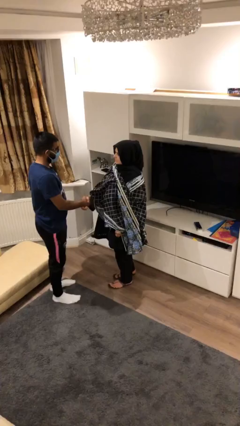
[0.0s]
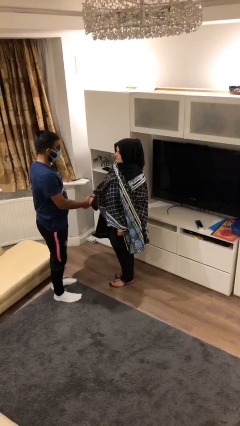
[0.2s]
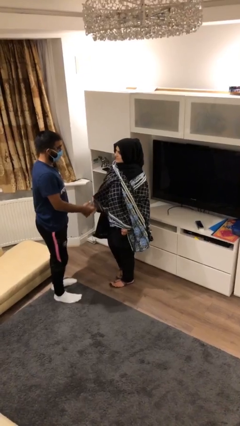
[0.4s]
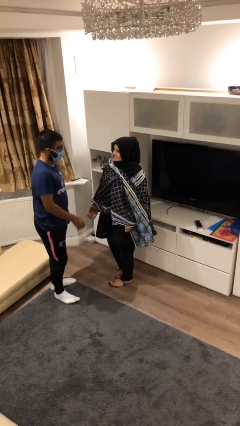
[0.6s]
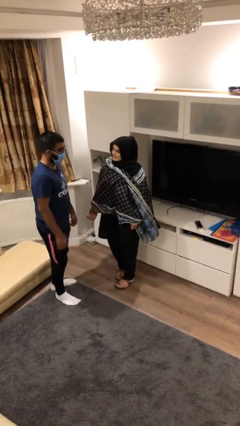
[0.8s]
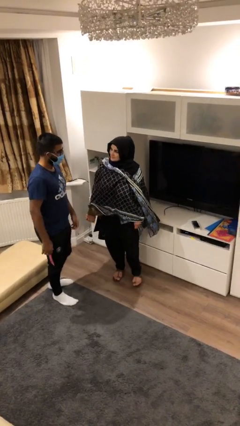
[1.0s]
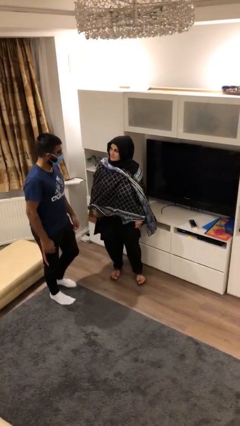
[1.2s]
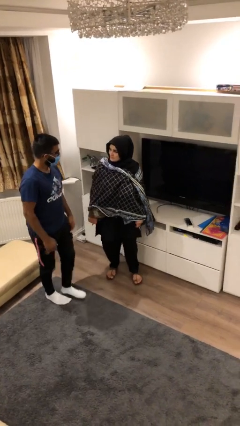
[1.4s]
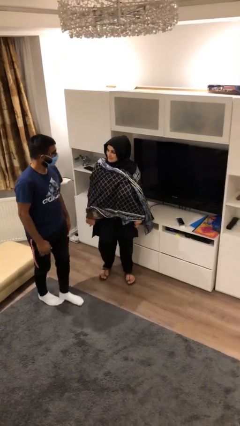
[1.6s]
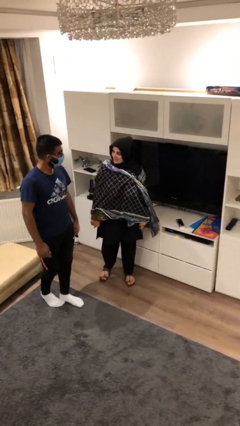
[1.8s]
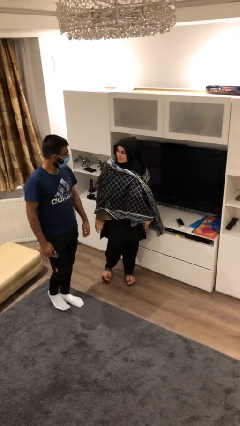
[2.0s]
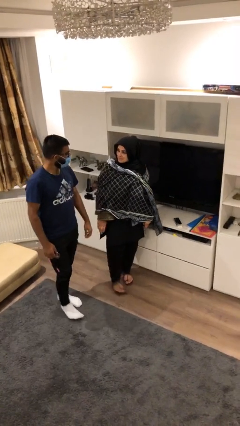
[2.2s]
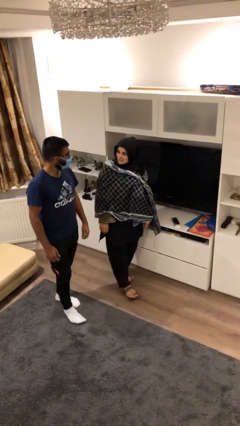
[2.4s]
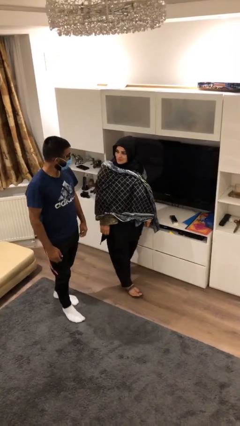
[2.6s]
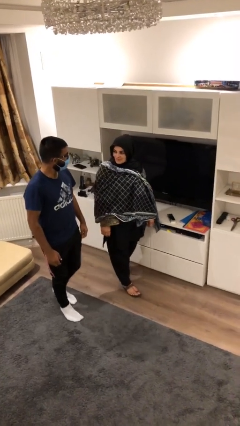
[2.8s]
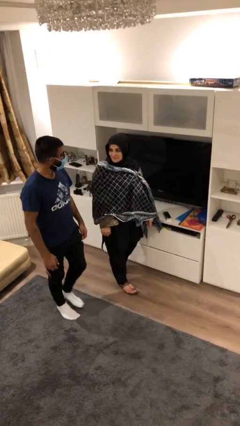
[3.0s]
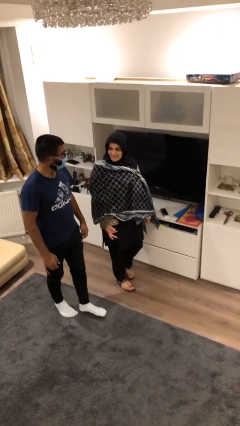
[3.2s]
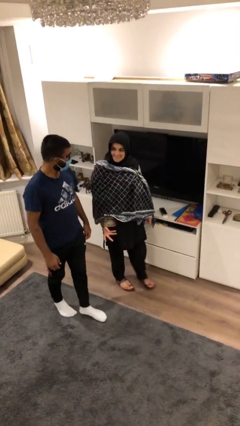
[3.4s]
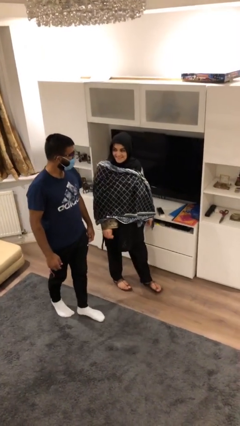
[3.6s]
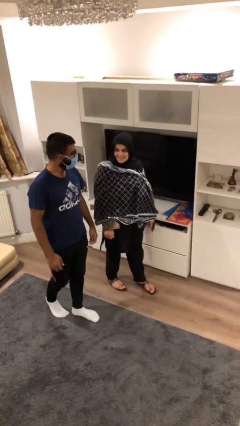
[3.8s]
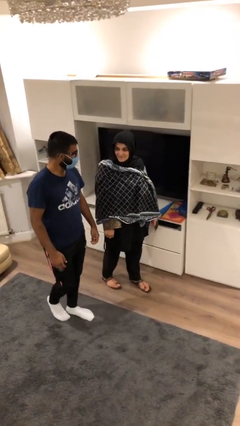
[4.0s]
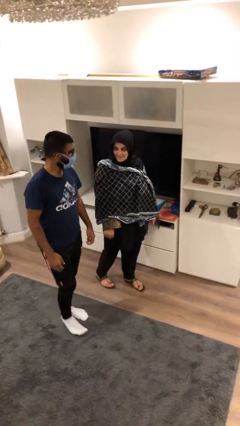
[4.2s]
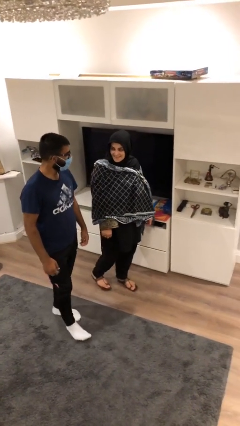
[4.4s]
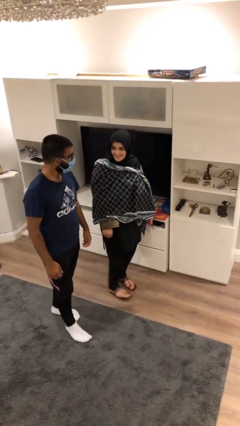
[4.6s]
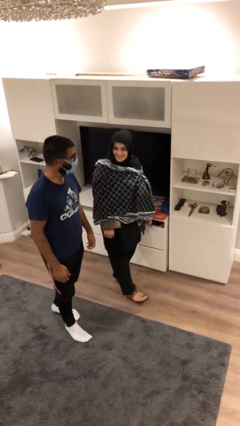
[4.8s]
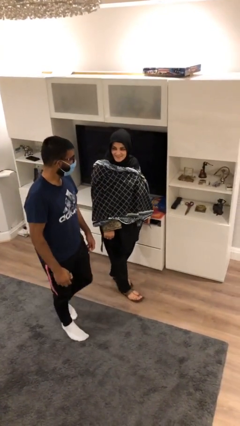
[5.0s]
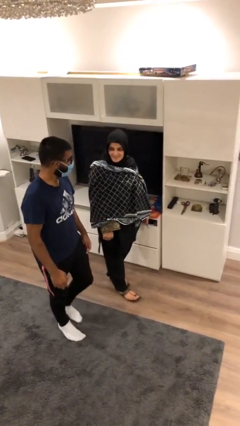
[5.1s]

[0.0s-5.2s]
person talks to person

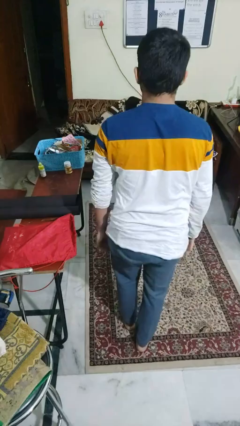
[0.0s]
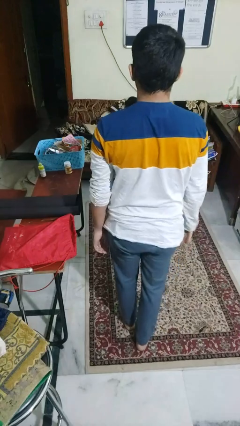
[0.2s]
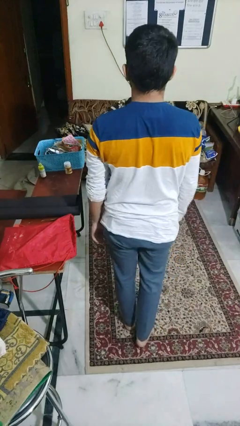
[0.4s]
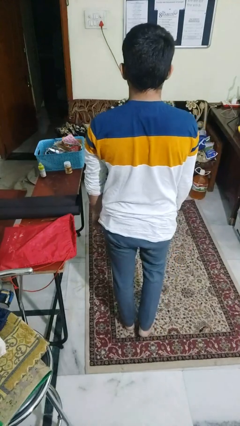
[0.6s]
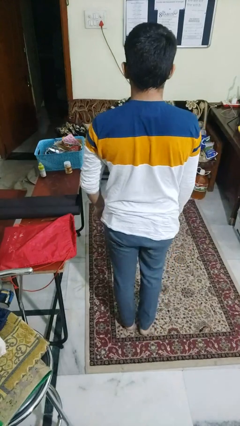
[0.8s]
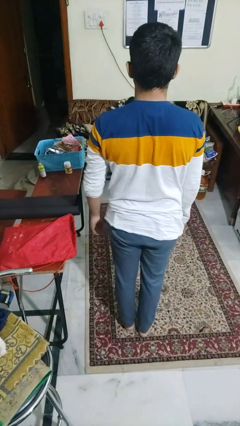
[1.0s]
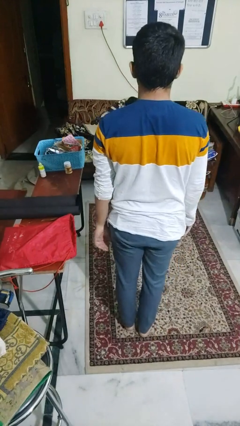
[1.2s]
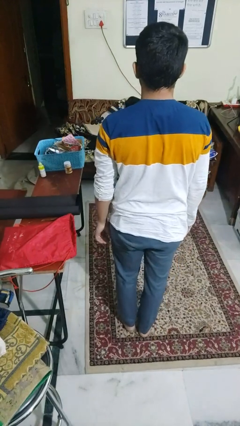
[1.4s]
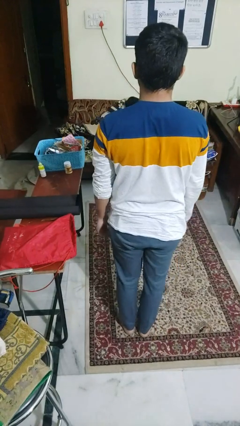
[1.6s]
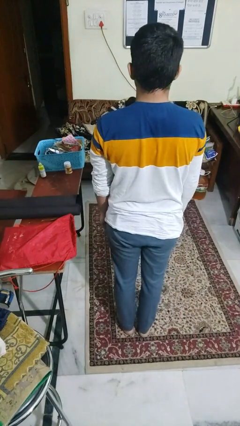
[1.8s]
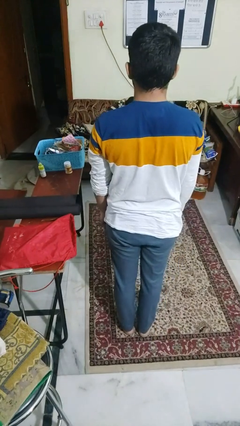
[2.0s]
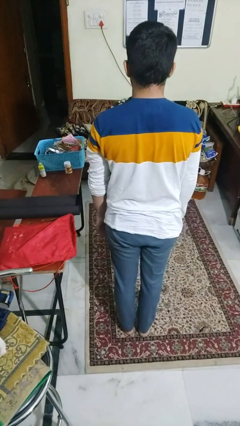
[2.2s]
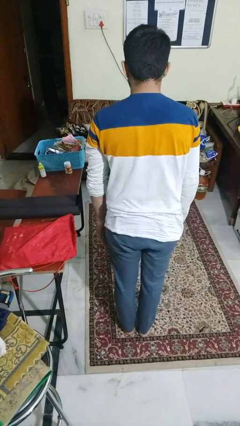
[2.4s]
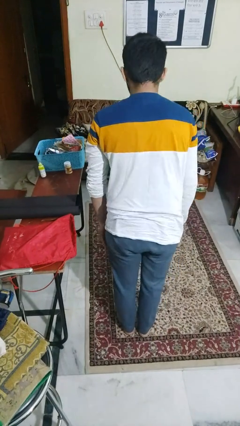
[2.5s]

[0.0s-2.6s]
person stands up from floor

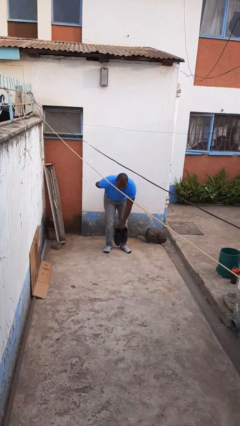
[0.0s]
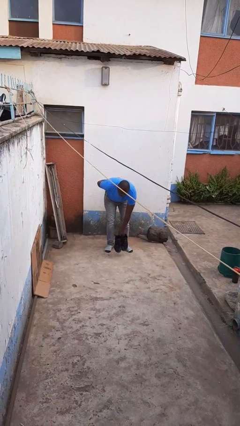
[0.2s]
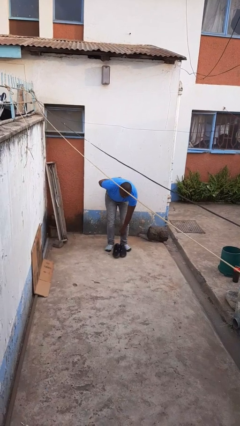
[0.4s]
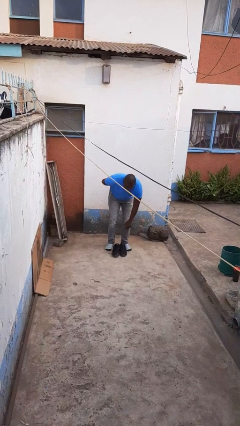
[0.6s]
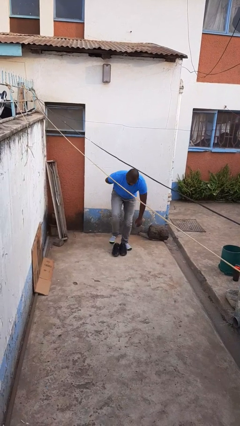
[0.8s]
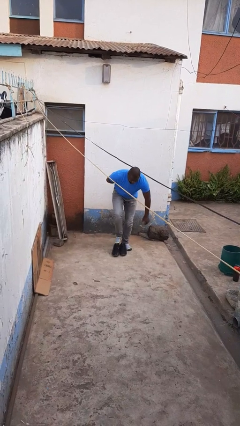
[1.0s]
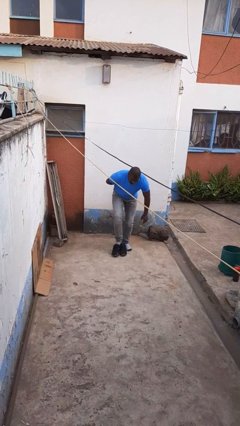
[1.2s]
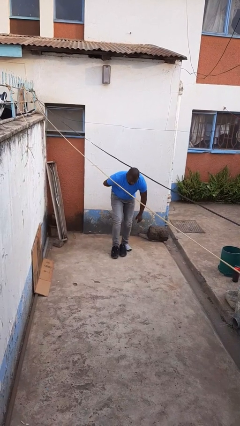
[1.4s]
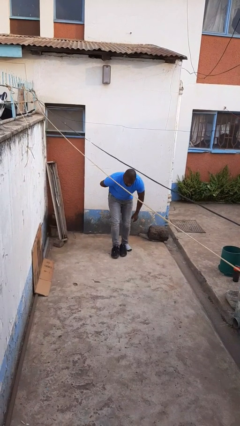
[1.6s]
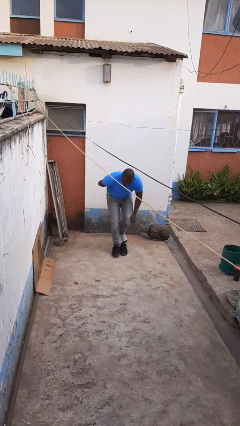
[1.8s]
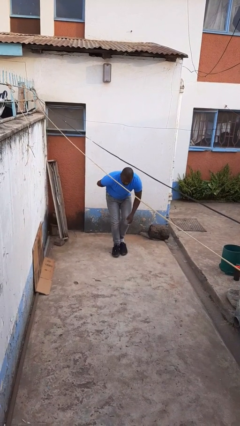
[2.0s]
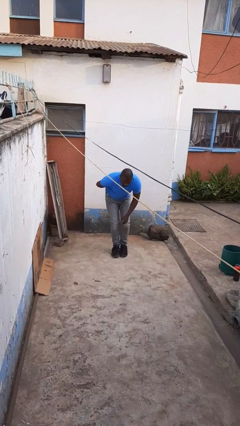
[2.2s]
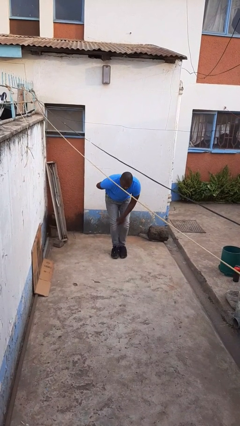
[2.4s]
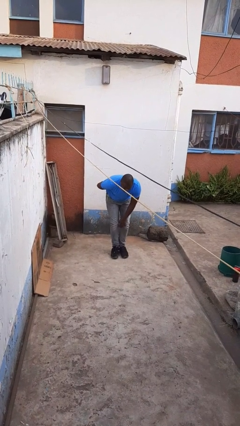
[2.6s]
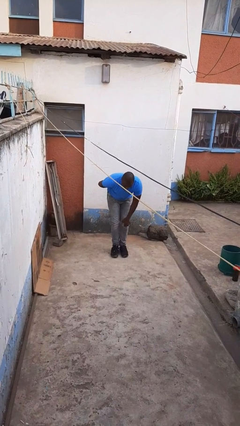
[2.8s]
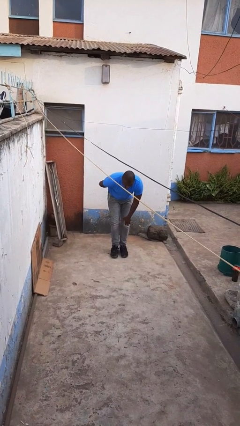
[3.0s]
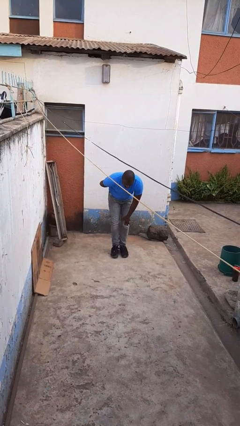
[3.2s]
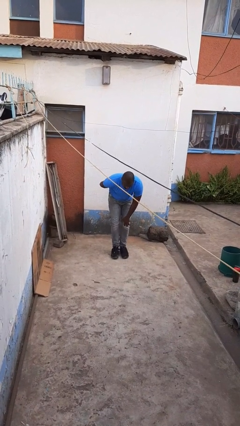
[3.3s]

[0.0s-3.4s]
person puts on shoes

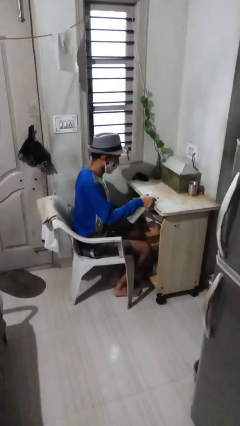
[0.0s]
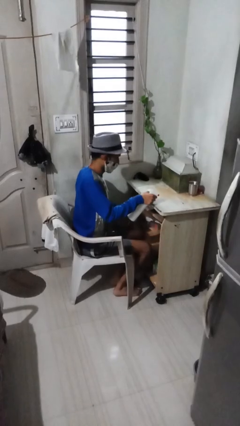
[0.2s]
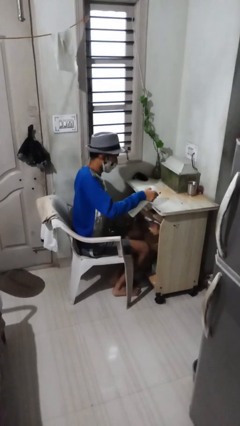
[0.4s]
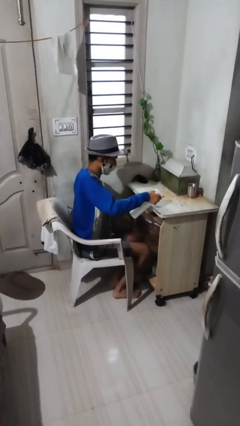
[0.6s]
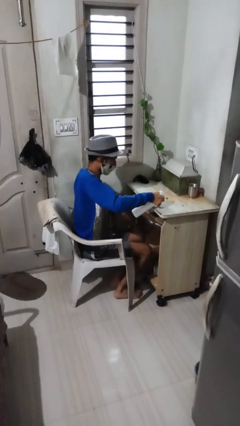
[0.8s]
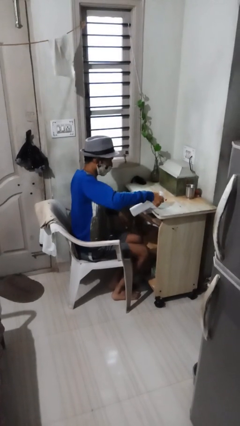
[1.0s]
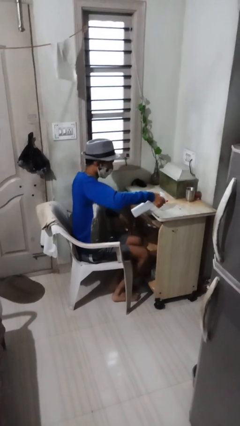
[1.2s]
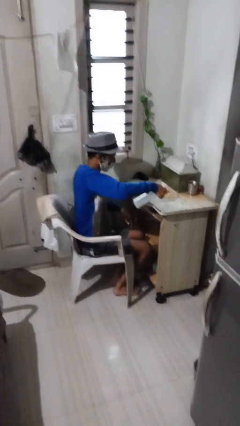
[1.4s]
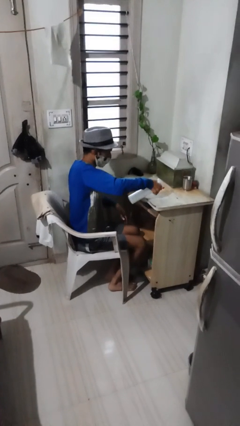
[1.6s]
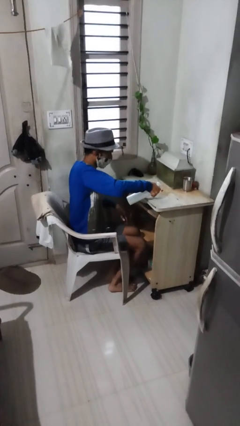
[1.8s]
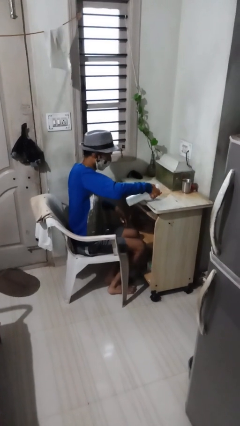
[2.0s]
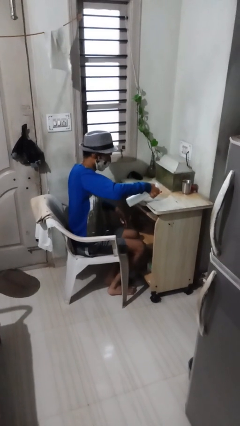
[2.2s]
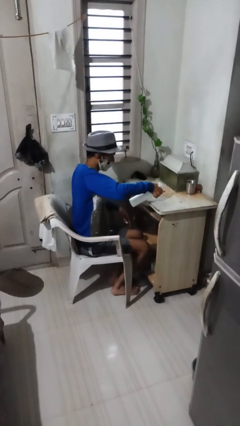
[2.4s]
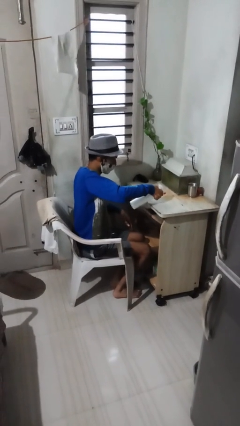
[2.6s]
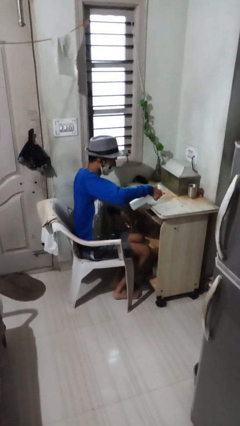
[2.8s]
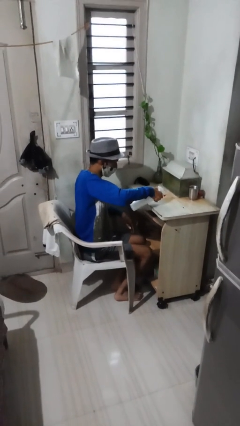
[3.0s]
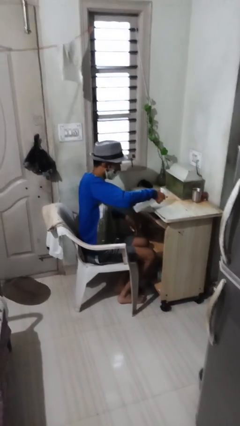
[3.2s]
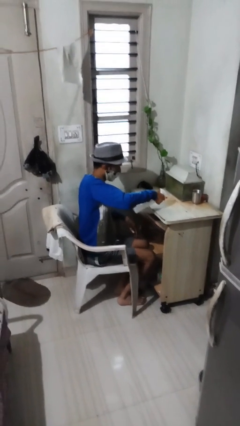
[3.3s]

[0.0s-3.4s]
person sprays from bottle

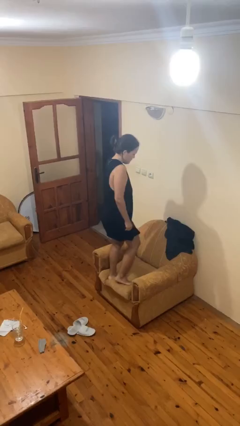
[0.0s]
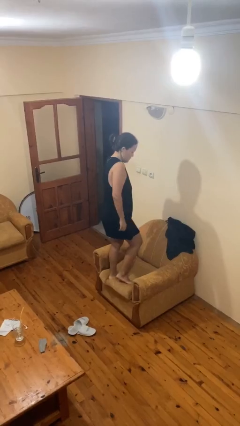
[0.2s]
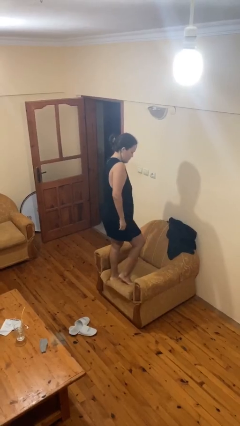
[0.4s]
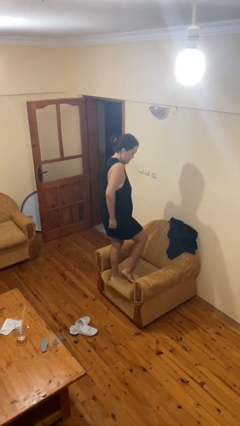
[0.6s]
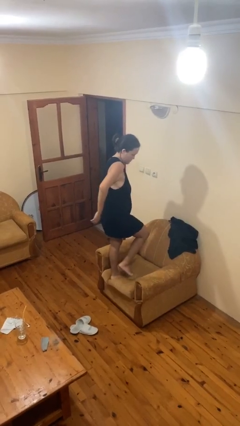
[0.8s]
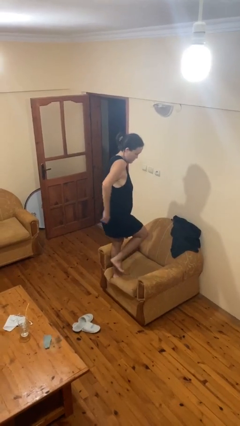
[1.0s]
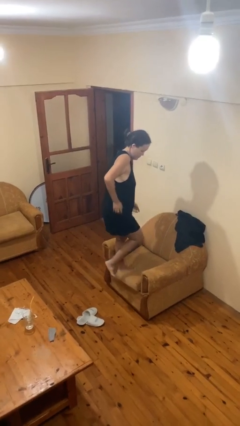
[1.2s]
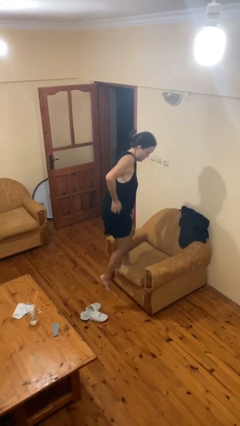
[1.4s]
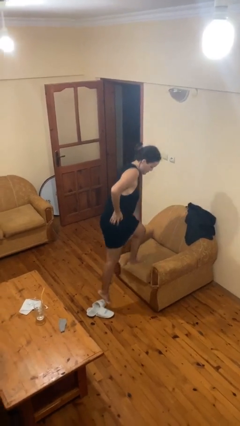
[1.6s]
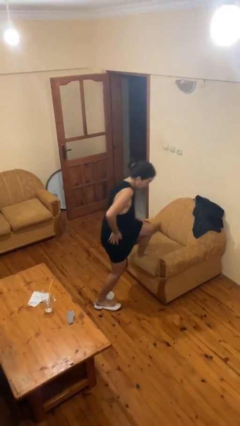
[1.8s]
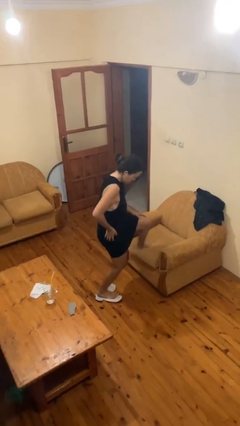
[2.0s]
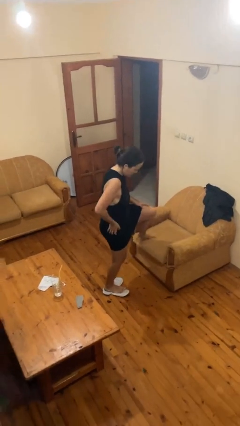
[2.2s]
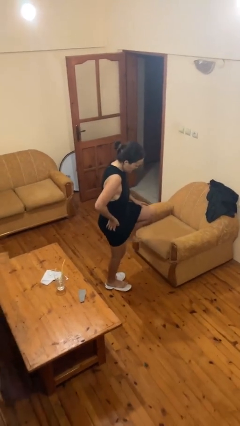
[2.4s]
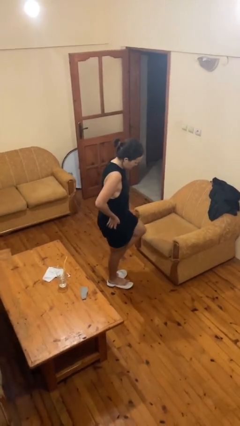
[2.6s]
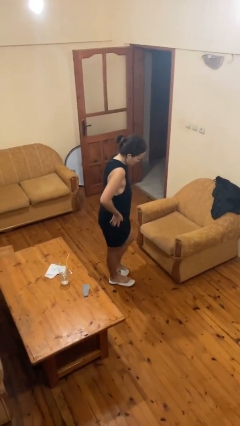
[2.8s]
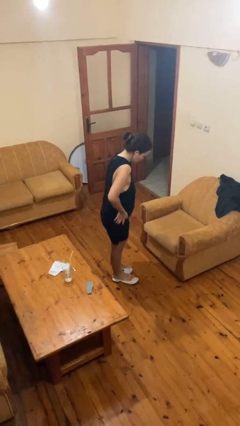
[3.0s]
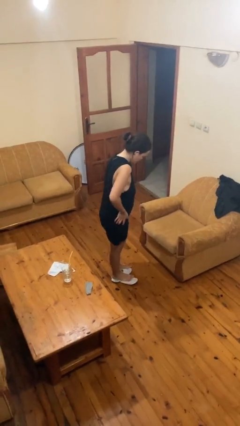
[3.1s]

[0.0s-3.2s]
person climbs off chair
